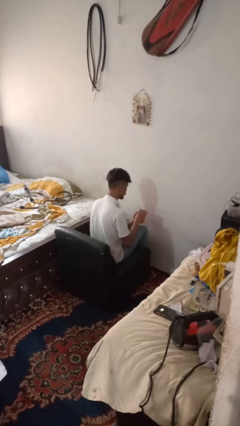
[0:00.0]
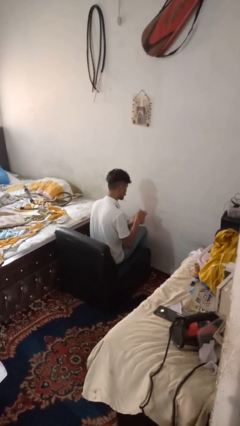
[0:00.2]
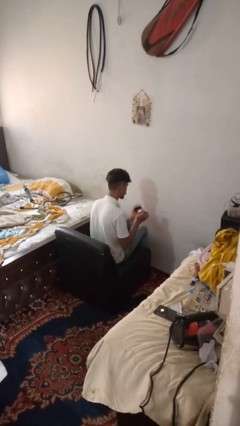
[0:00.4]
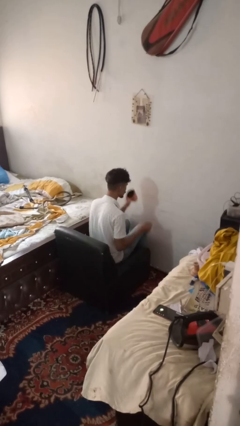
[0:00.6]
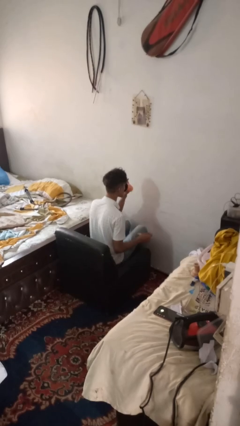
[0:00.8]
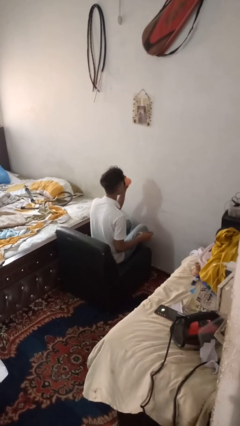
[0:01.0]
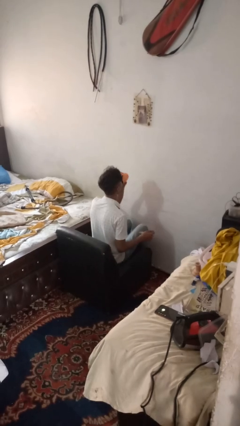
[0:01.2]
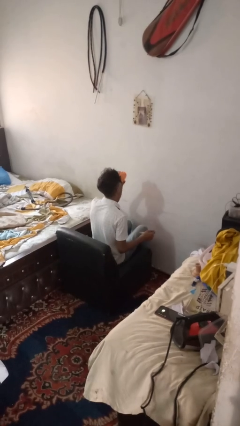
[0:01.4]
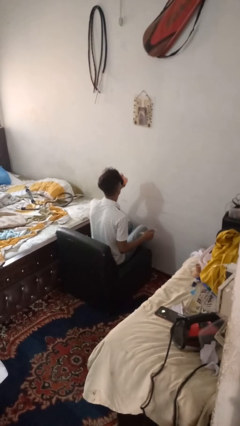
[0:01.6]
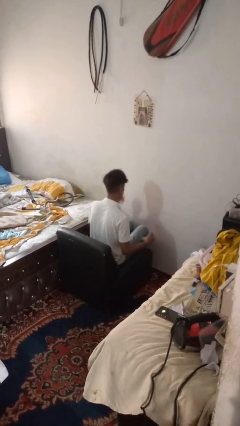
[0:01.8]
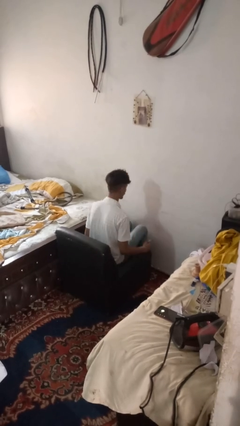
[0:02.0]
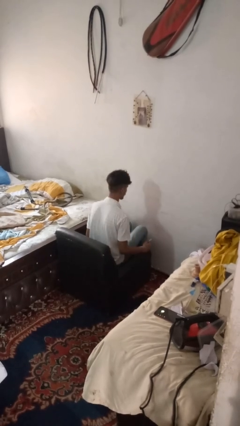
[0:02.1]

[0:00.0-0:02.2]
person drinks from mug

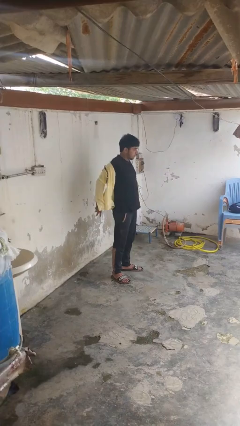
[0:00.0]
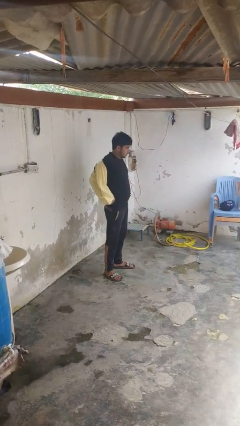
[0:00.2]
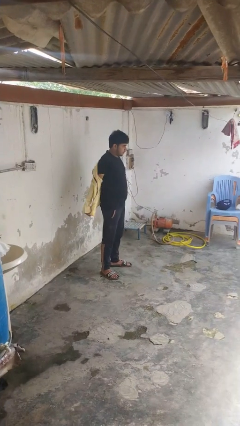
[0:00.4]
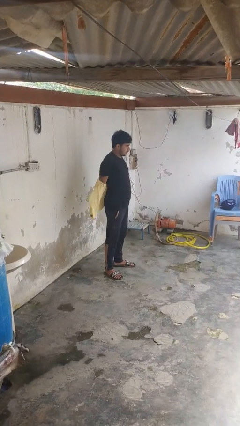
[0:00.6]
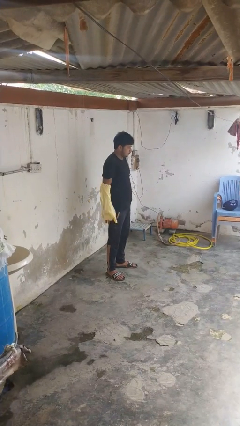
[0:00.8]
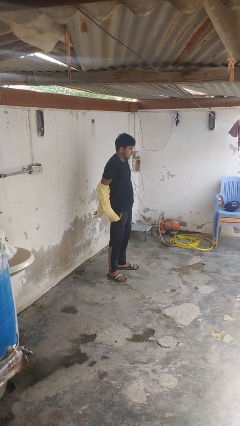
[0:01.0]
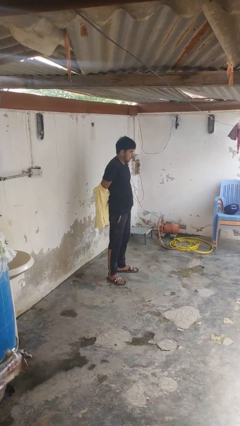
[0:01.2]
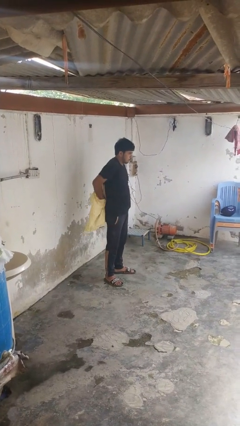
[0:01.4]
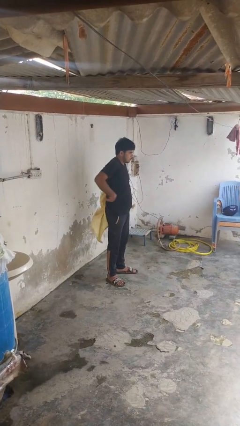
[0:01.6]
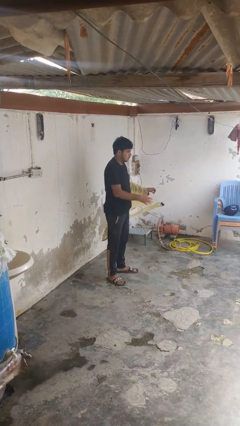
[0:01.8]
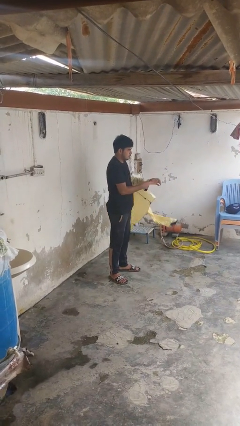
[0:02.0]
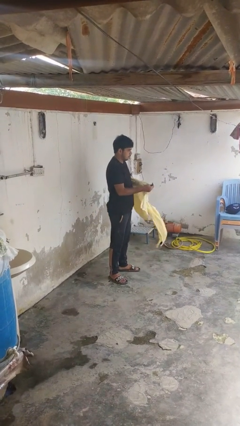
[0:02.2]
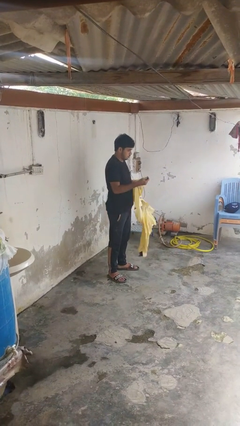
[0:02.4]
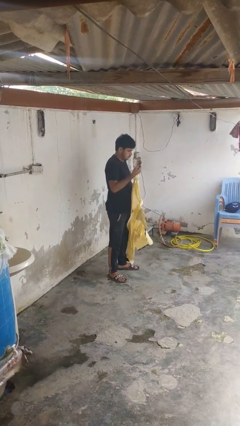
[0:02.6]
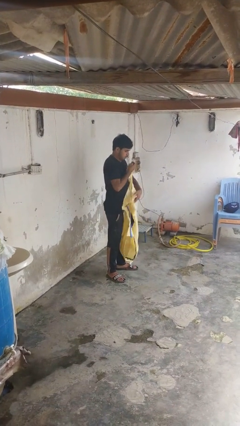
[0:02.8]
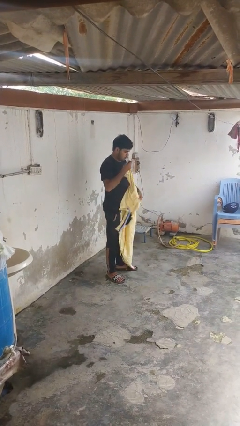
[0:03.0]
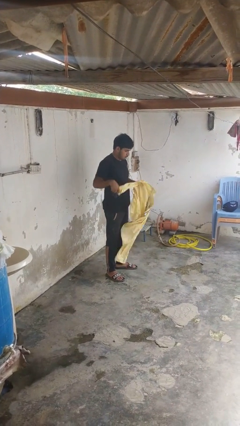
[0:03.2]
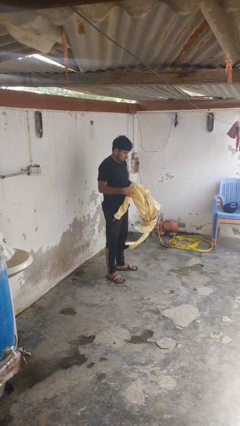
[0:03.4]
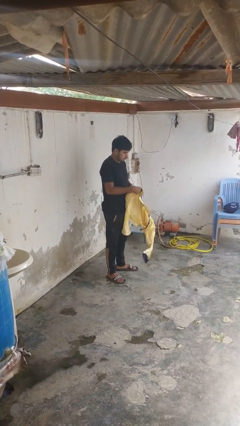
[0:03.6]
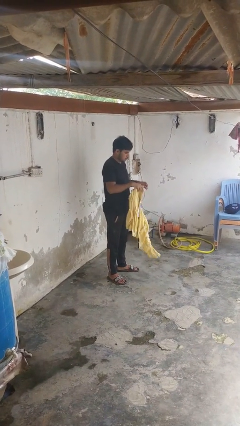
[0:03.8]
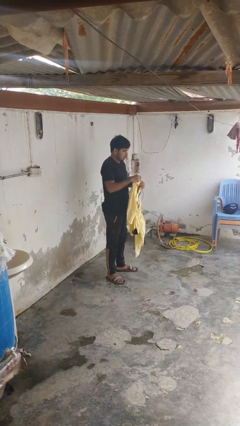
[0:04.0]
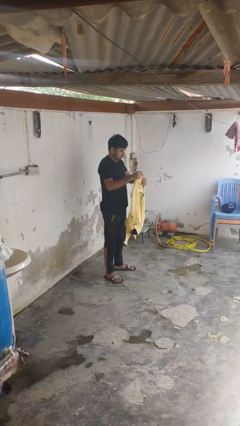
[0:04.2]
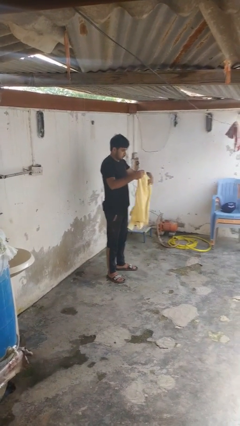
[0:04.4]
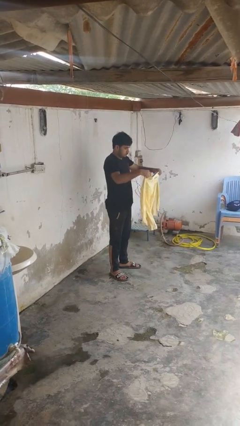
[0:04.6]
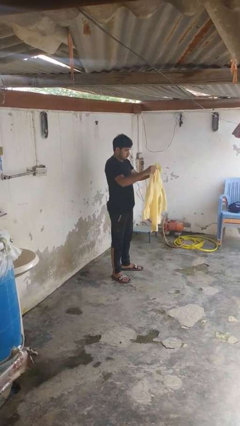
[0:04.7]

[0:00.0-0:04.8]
person takes off shirt

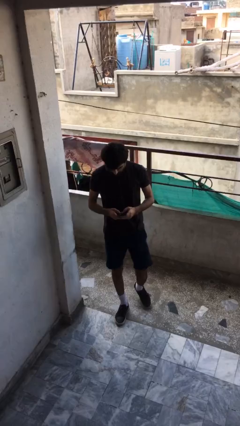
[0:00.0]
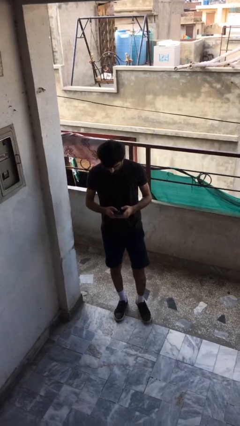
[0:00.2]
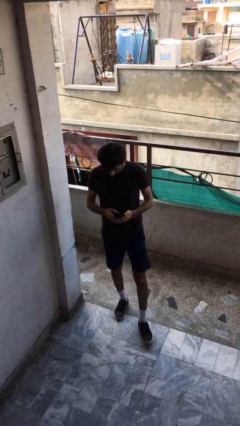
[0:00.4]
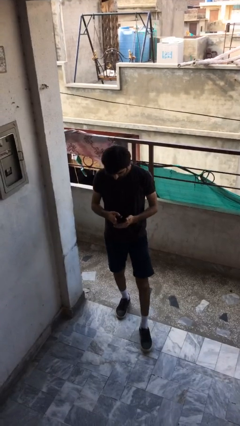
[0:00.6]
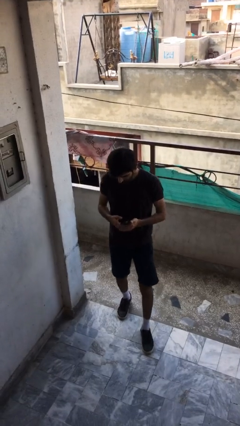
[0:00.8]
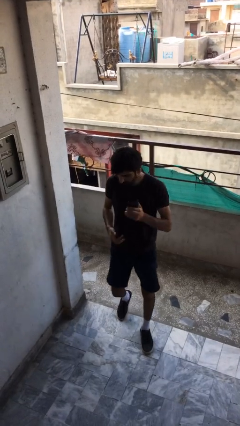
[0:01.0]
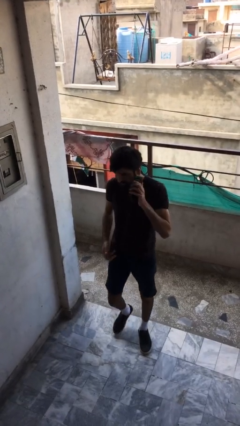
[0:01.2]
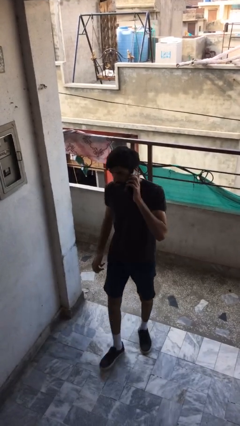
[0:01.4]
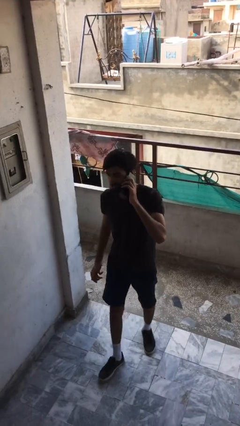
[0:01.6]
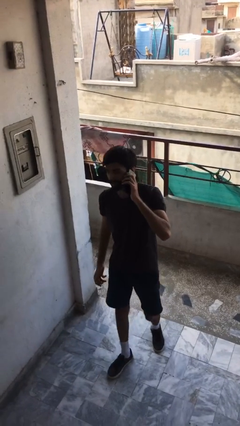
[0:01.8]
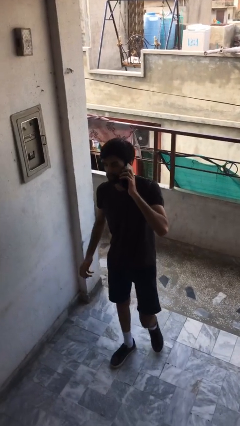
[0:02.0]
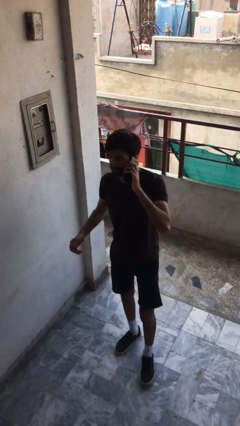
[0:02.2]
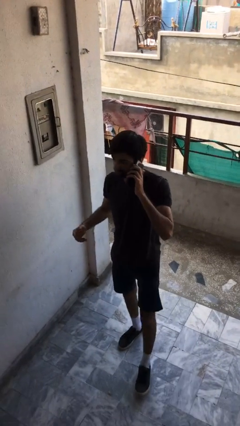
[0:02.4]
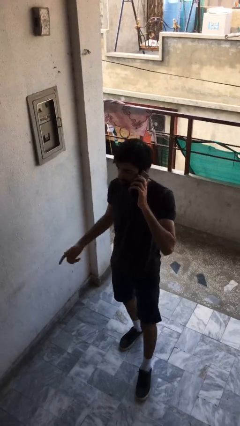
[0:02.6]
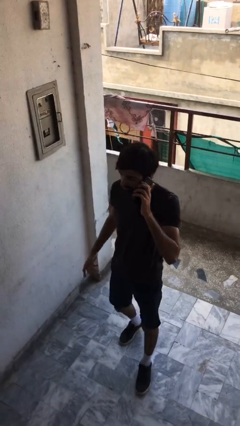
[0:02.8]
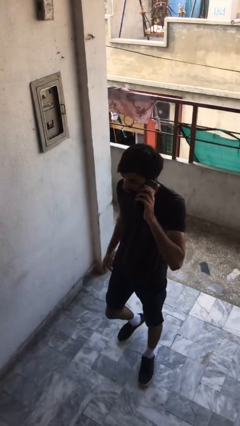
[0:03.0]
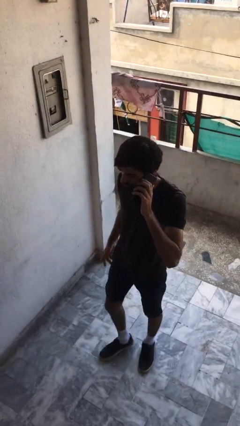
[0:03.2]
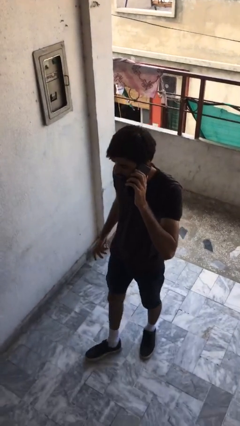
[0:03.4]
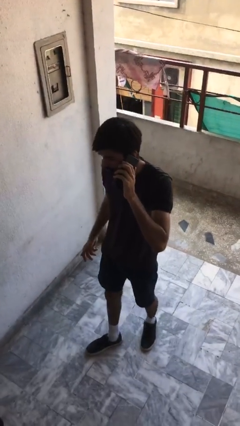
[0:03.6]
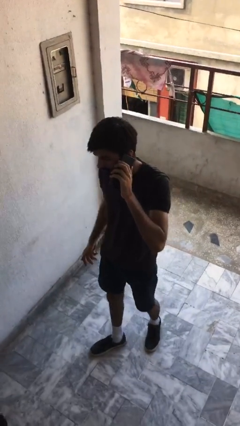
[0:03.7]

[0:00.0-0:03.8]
person talks on phone

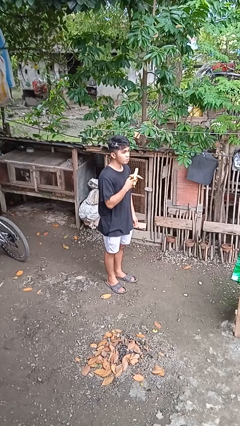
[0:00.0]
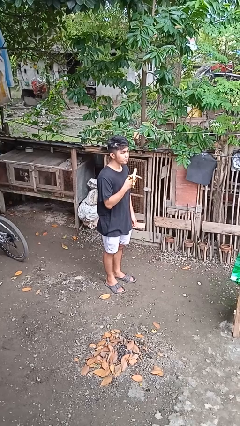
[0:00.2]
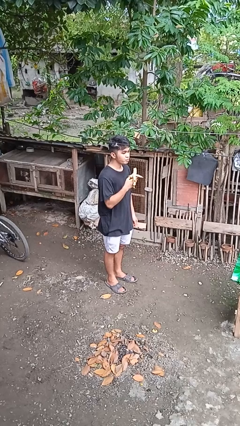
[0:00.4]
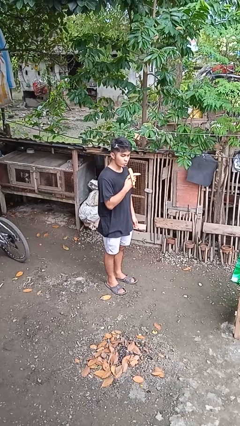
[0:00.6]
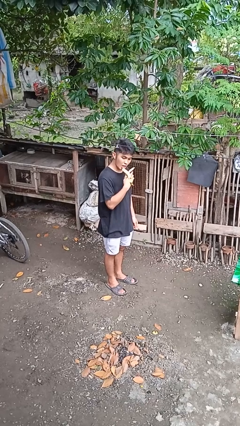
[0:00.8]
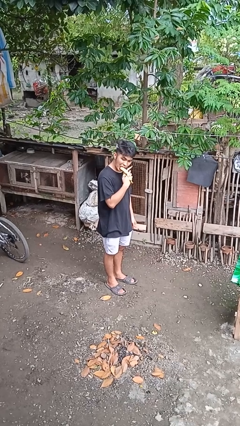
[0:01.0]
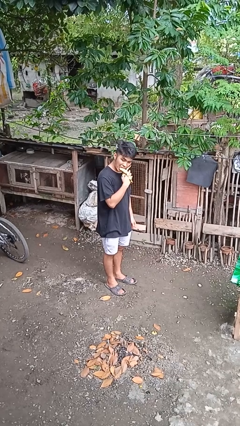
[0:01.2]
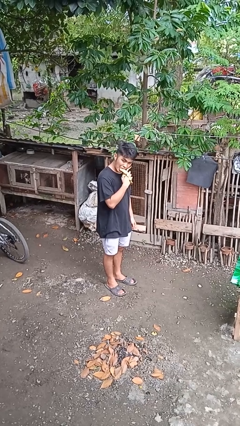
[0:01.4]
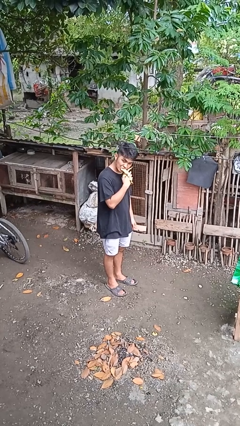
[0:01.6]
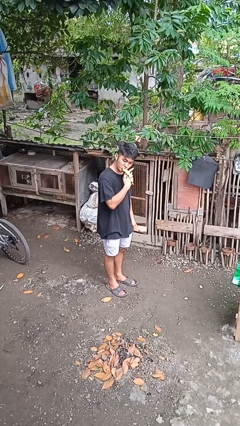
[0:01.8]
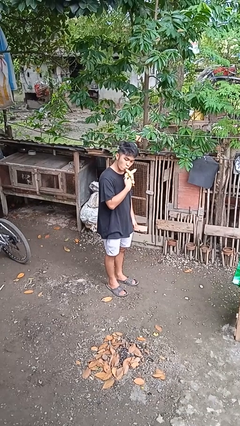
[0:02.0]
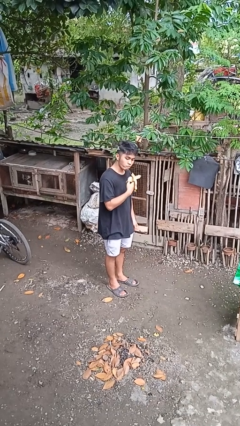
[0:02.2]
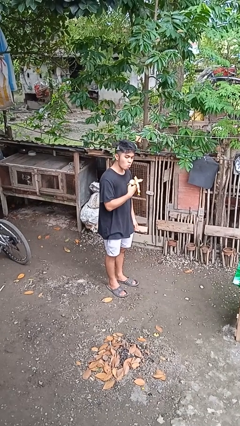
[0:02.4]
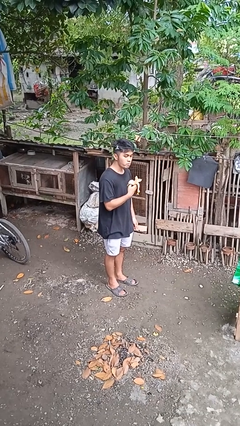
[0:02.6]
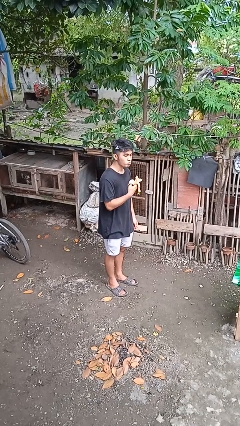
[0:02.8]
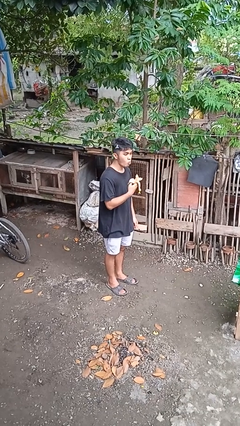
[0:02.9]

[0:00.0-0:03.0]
person eats banana

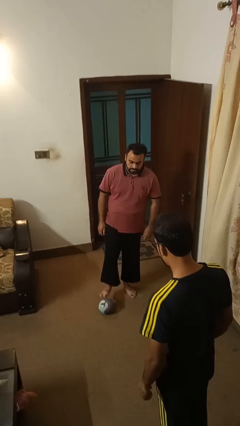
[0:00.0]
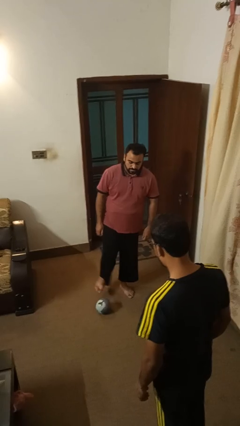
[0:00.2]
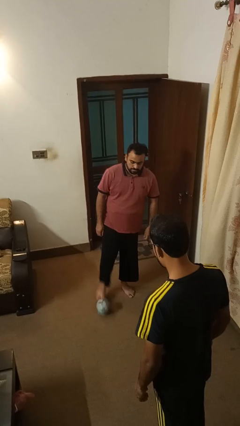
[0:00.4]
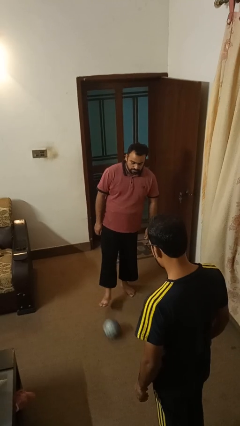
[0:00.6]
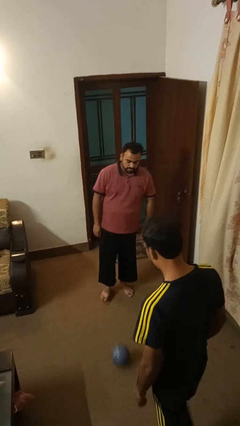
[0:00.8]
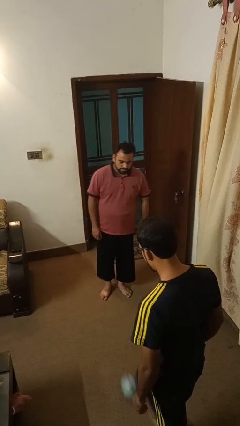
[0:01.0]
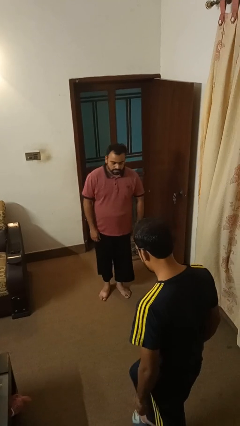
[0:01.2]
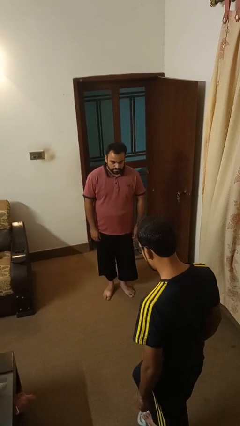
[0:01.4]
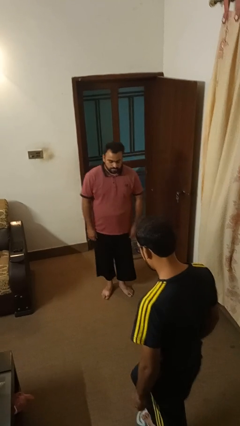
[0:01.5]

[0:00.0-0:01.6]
person kicks object to person

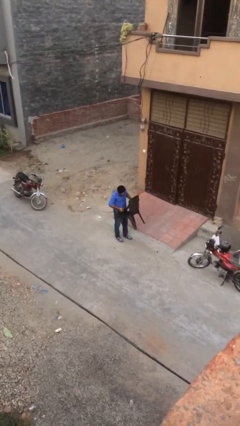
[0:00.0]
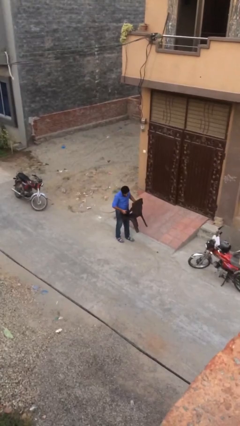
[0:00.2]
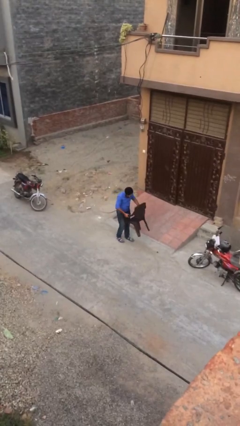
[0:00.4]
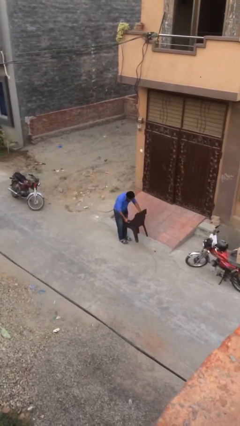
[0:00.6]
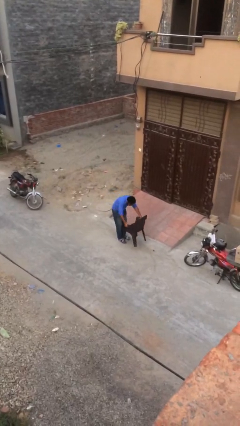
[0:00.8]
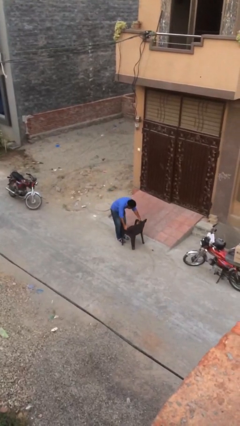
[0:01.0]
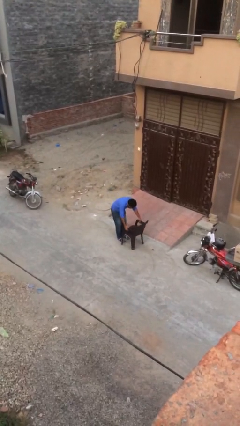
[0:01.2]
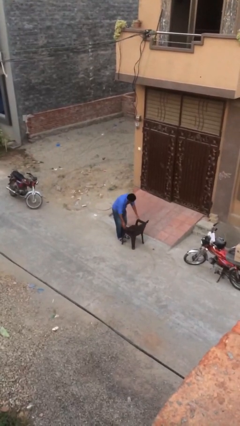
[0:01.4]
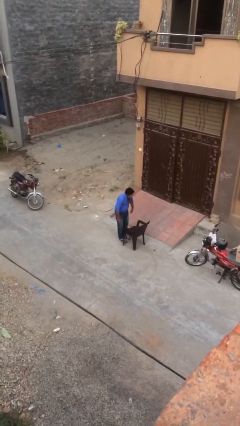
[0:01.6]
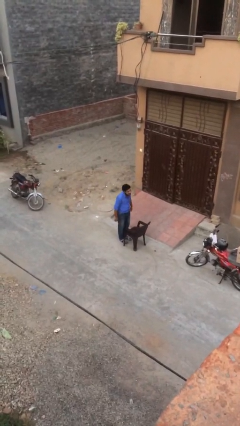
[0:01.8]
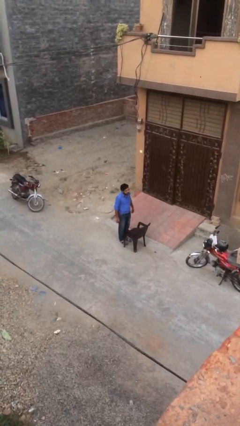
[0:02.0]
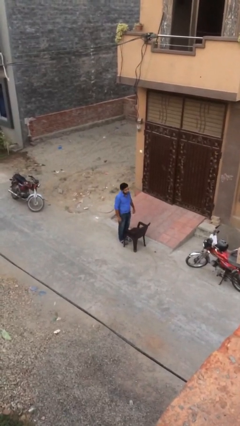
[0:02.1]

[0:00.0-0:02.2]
person puts down object on floor
